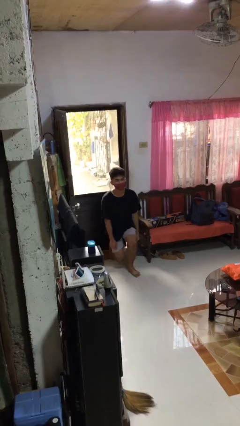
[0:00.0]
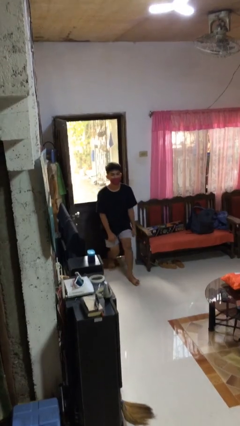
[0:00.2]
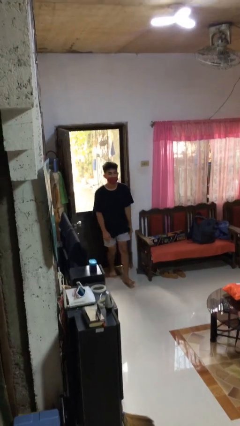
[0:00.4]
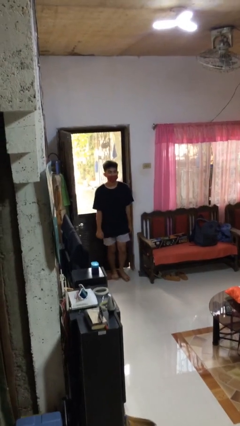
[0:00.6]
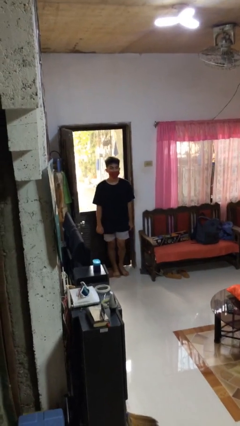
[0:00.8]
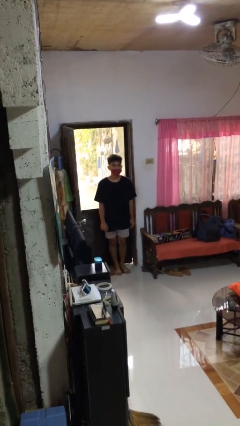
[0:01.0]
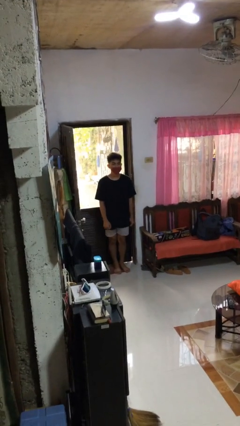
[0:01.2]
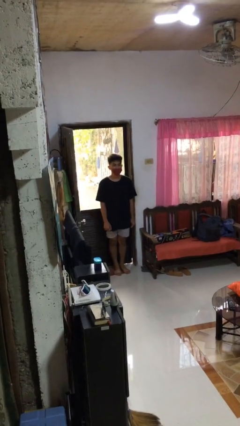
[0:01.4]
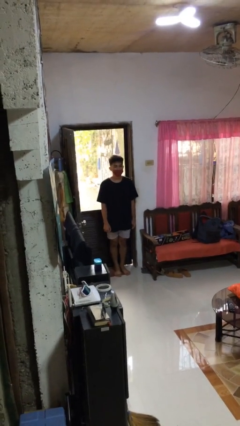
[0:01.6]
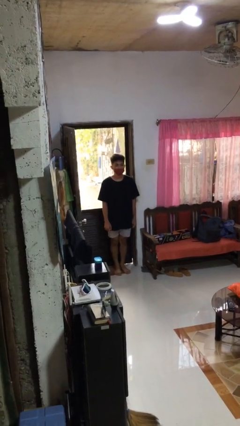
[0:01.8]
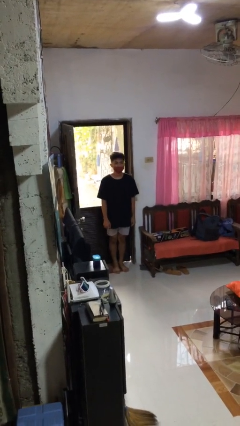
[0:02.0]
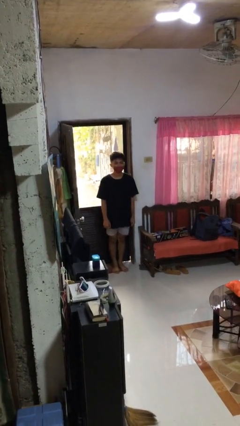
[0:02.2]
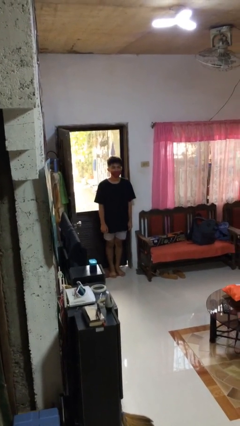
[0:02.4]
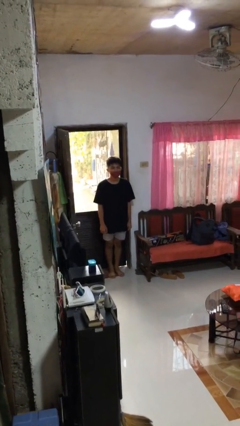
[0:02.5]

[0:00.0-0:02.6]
person stands up from floor

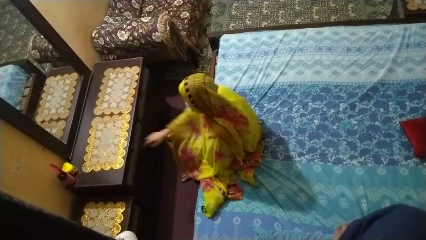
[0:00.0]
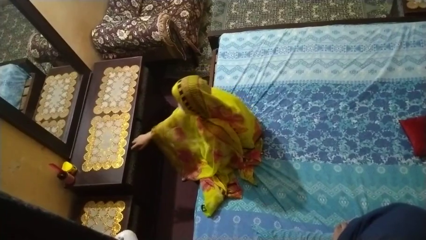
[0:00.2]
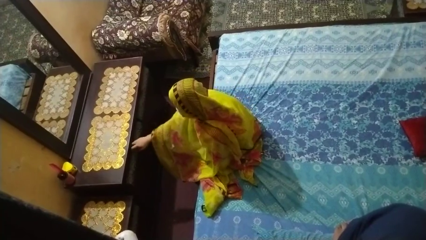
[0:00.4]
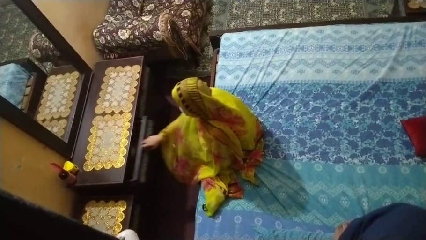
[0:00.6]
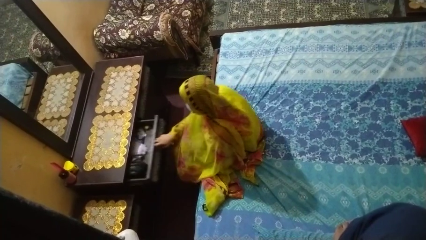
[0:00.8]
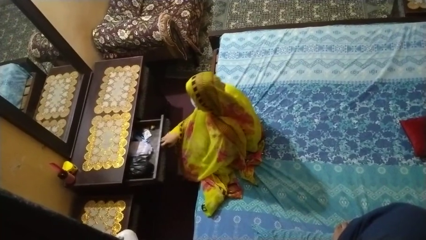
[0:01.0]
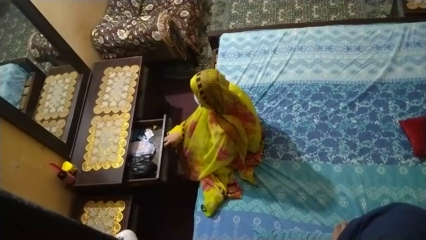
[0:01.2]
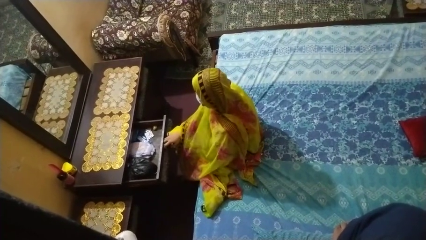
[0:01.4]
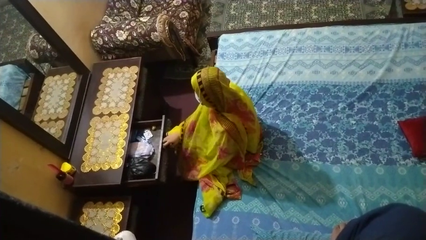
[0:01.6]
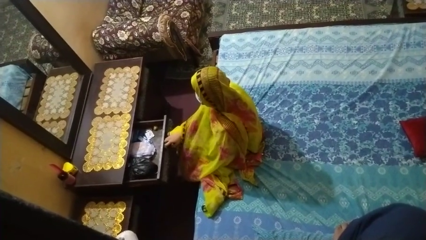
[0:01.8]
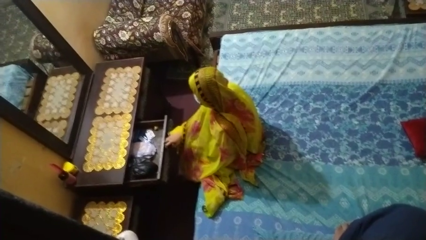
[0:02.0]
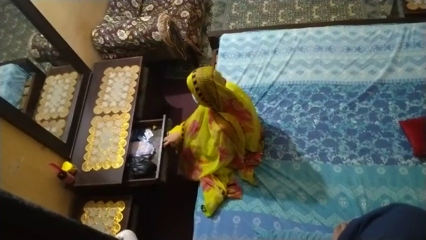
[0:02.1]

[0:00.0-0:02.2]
person opens dresser drawer

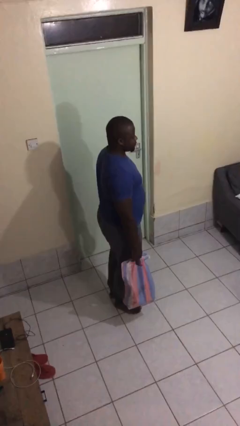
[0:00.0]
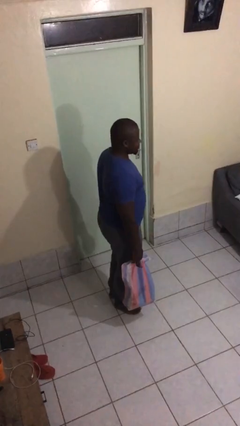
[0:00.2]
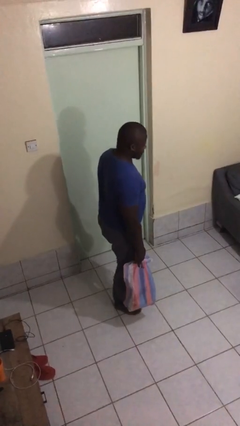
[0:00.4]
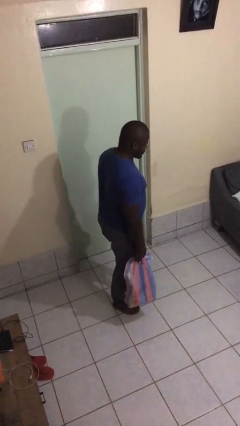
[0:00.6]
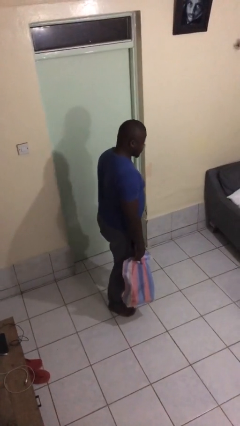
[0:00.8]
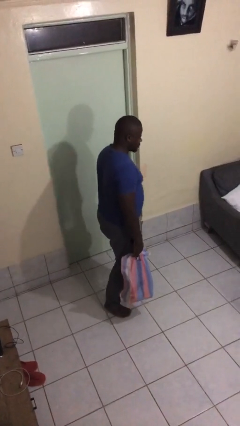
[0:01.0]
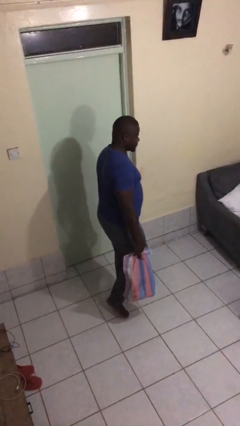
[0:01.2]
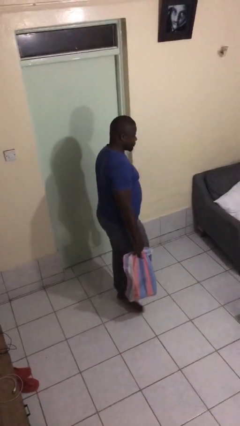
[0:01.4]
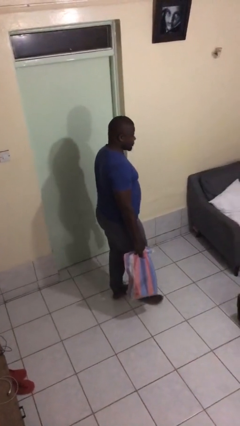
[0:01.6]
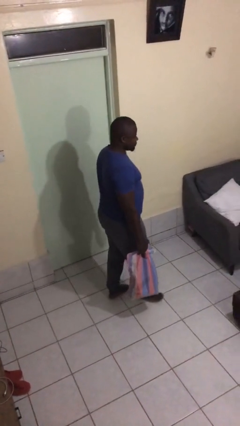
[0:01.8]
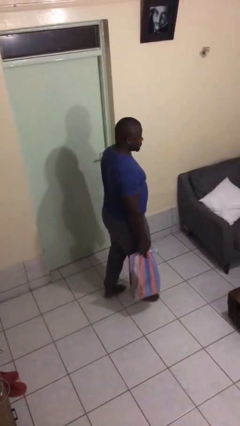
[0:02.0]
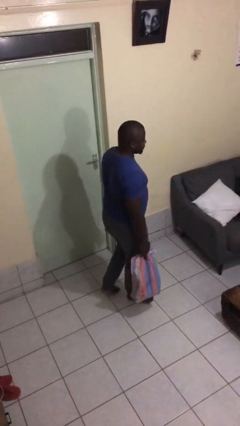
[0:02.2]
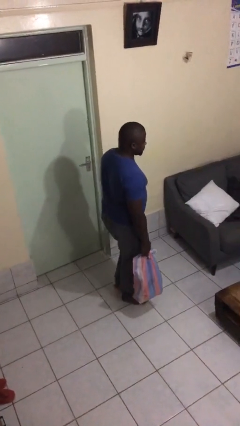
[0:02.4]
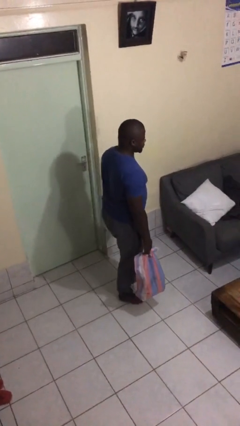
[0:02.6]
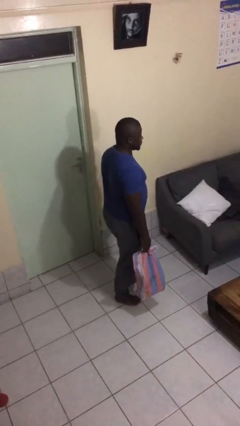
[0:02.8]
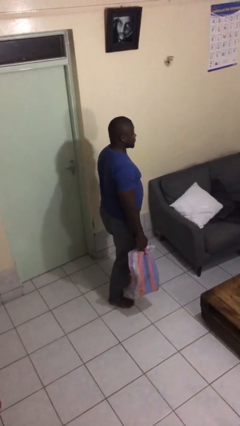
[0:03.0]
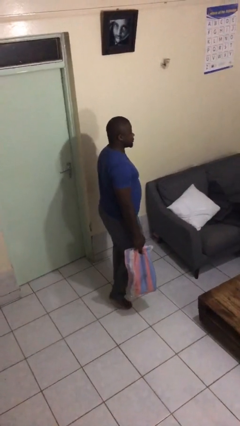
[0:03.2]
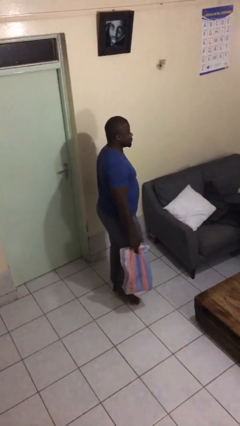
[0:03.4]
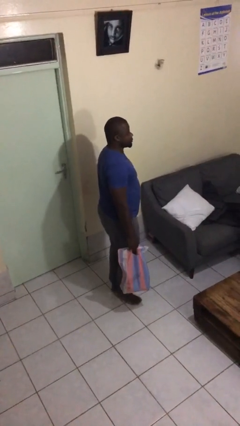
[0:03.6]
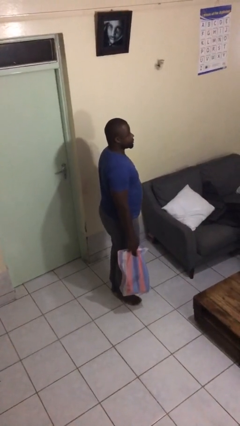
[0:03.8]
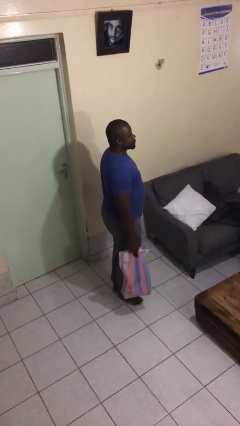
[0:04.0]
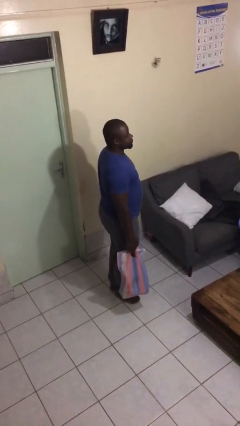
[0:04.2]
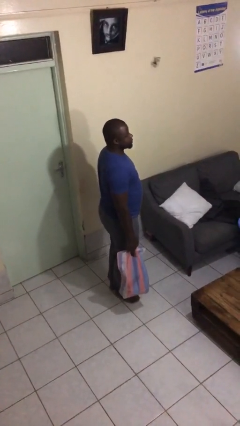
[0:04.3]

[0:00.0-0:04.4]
person carries groceries

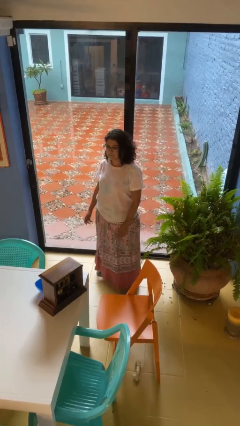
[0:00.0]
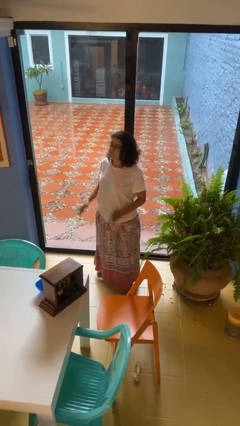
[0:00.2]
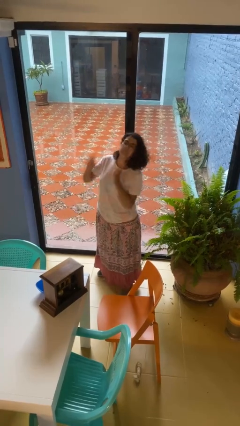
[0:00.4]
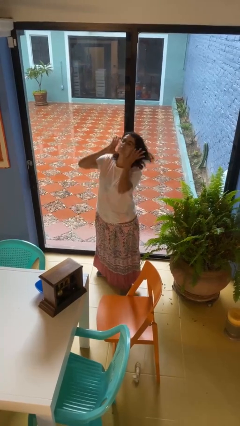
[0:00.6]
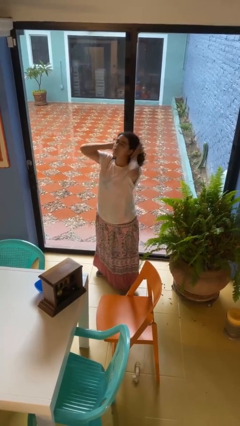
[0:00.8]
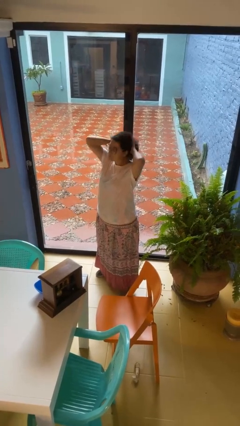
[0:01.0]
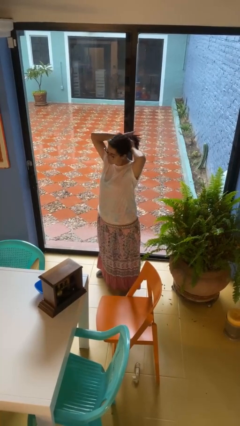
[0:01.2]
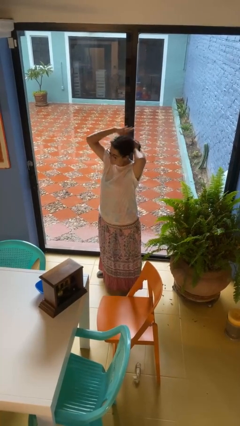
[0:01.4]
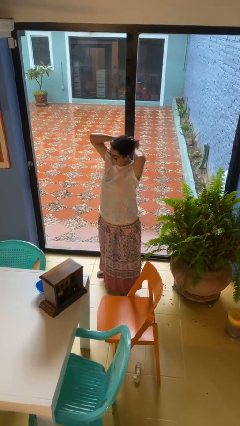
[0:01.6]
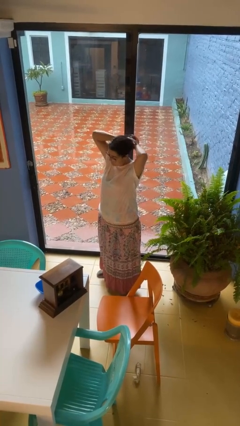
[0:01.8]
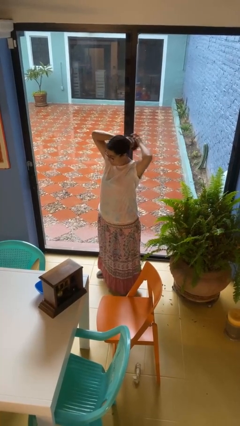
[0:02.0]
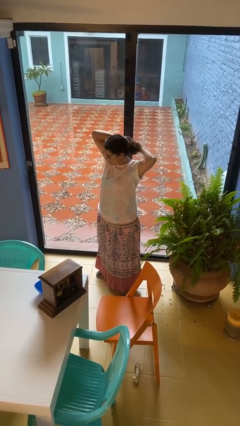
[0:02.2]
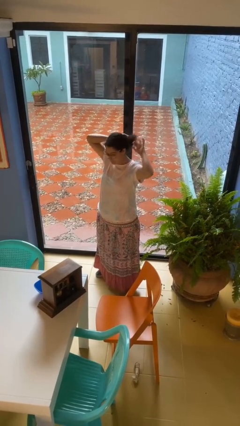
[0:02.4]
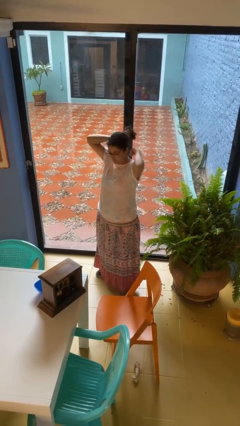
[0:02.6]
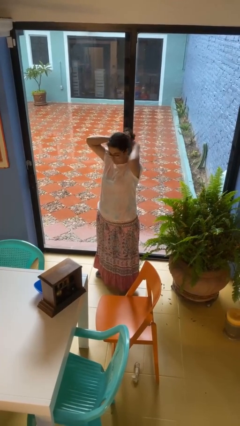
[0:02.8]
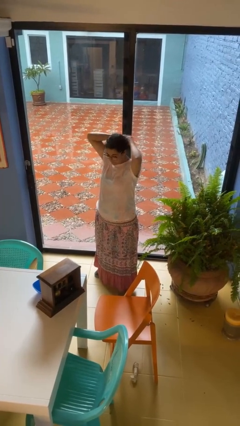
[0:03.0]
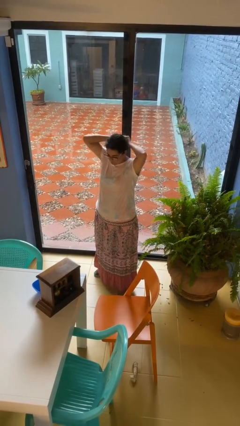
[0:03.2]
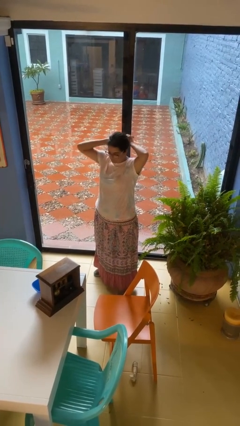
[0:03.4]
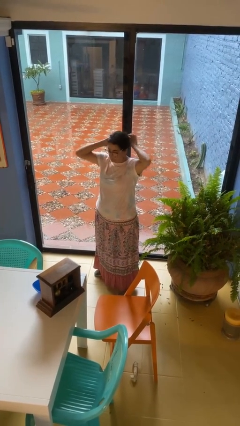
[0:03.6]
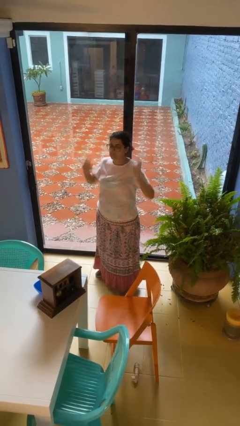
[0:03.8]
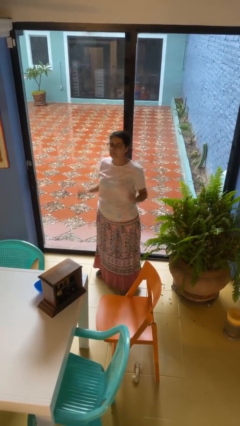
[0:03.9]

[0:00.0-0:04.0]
person puts hair in ponytail

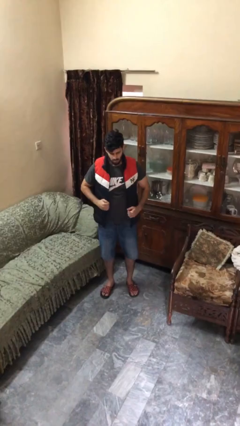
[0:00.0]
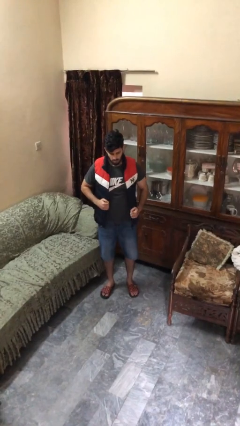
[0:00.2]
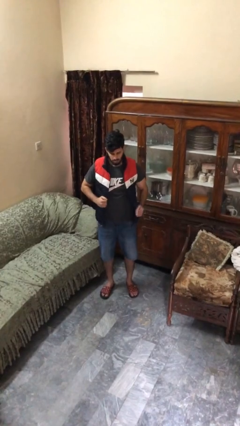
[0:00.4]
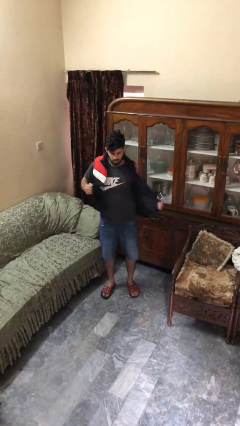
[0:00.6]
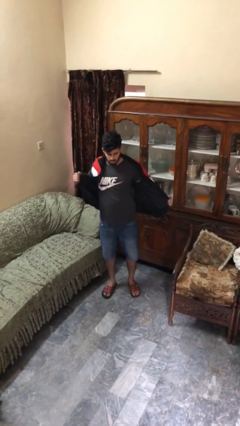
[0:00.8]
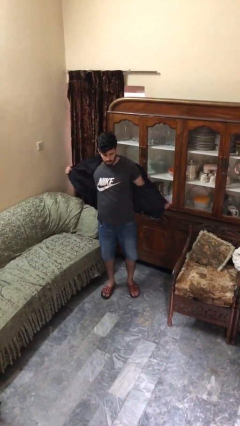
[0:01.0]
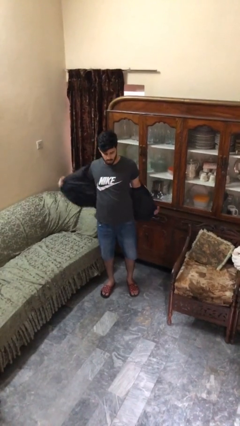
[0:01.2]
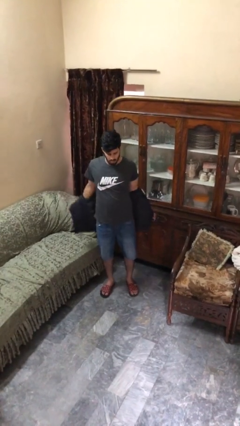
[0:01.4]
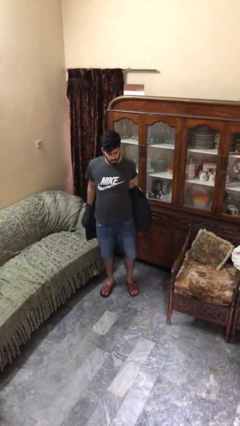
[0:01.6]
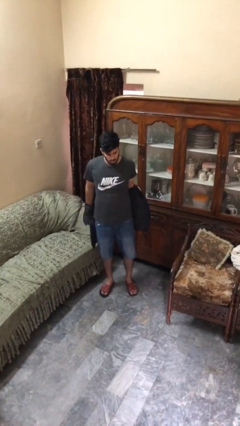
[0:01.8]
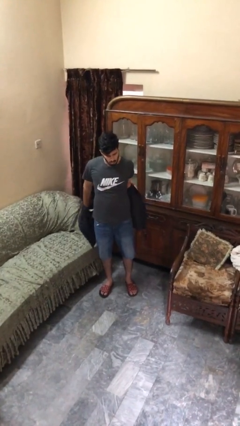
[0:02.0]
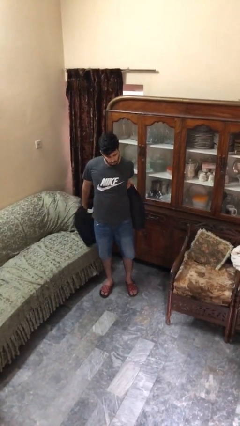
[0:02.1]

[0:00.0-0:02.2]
person takes off jacket

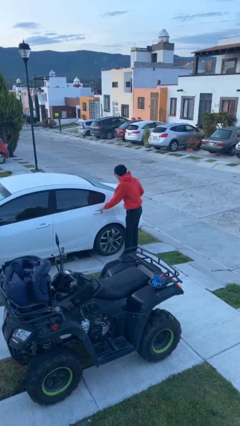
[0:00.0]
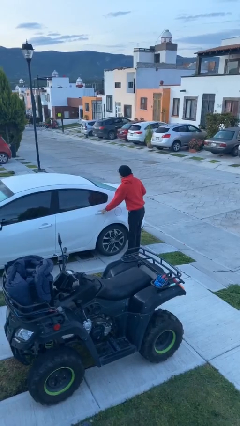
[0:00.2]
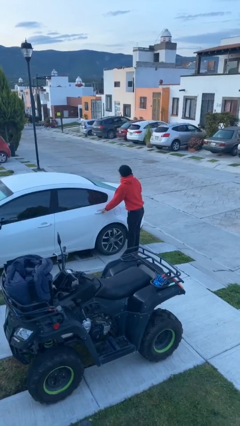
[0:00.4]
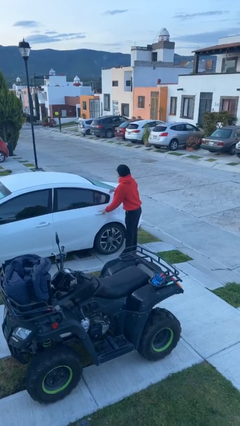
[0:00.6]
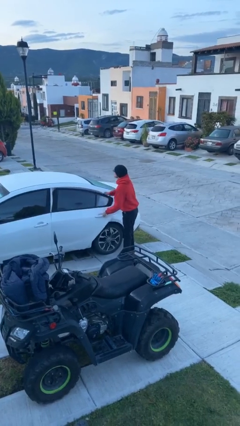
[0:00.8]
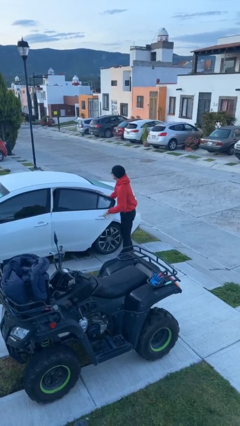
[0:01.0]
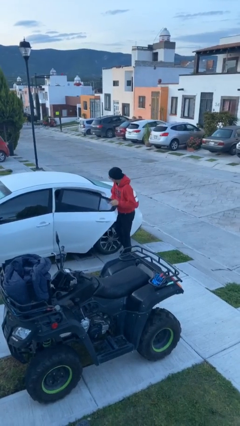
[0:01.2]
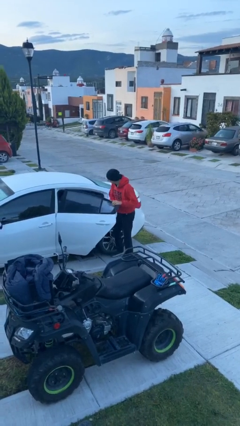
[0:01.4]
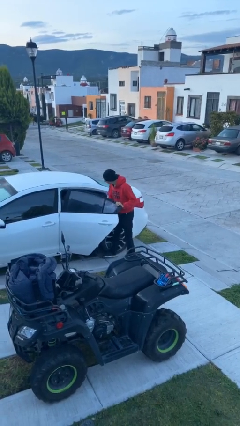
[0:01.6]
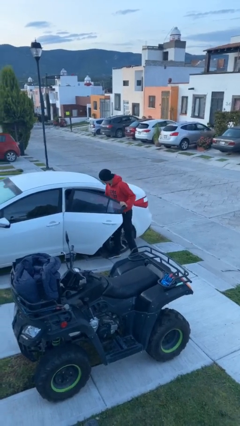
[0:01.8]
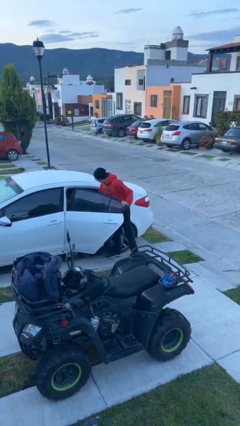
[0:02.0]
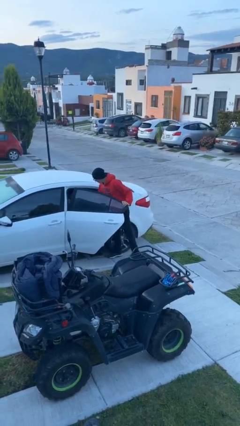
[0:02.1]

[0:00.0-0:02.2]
person opens car door
